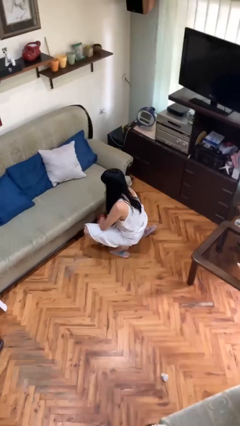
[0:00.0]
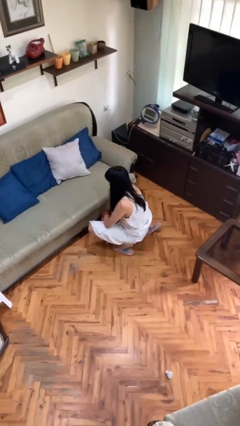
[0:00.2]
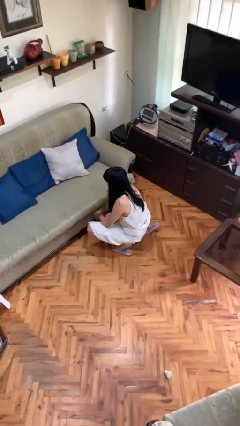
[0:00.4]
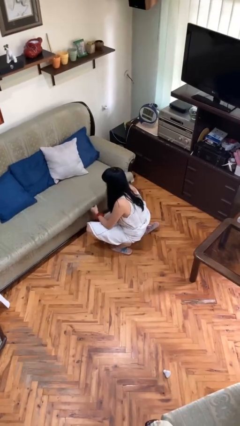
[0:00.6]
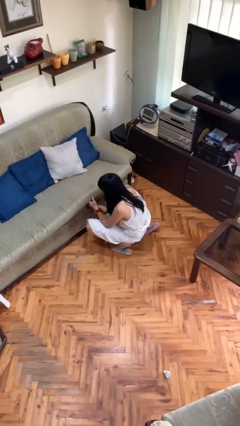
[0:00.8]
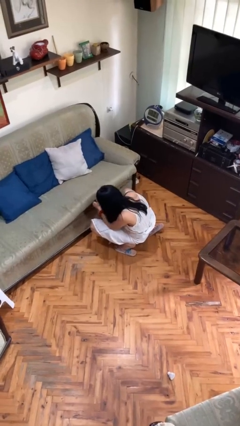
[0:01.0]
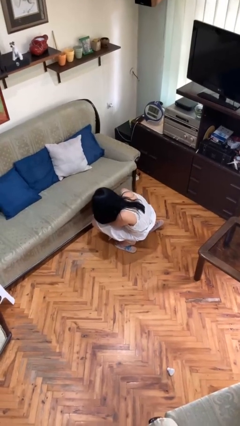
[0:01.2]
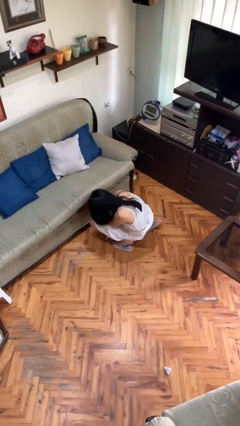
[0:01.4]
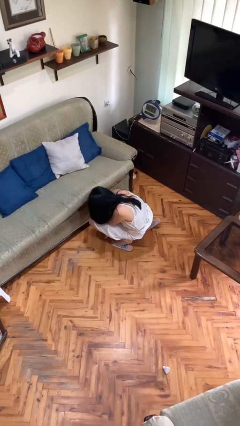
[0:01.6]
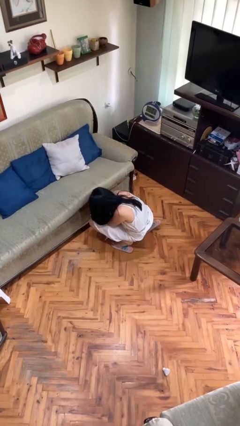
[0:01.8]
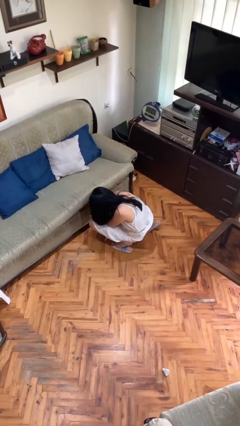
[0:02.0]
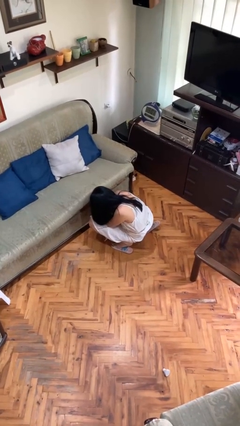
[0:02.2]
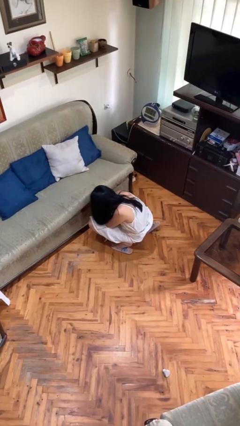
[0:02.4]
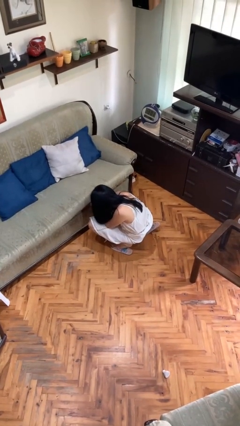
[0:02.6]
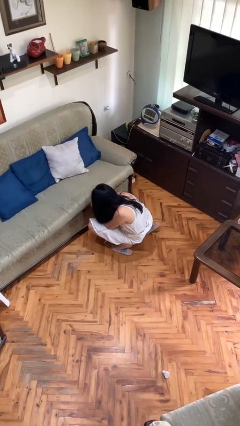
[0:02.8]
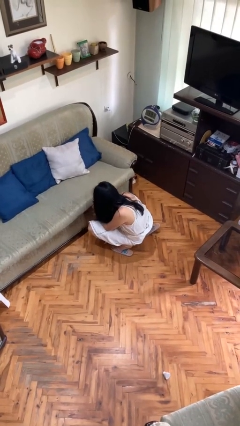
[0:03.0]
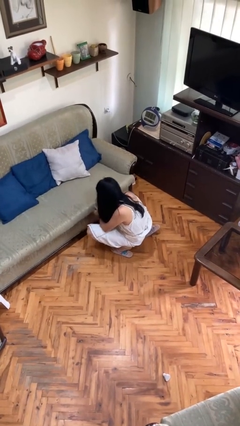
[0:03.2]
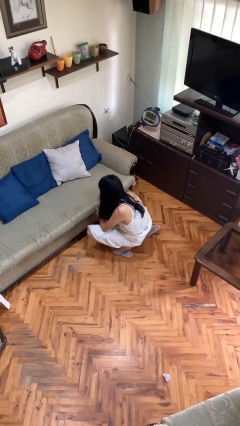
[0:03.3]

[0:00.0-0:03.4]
person searches under couch

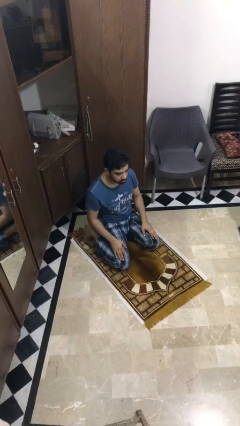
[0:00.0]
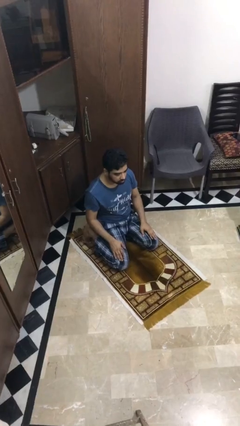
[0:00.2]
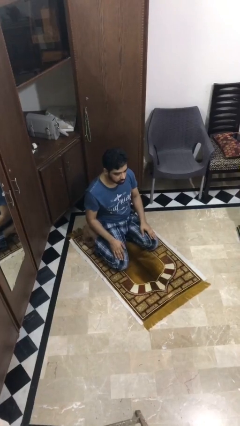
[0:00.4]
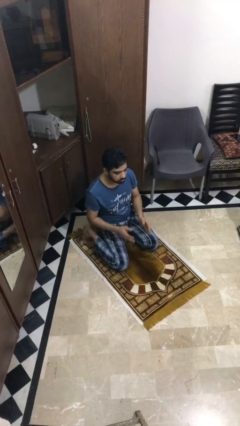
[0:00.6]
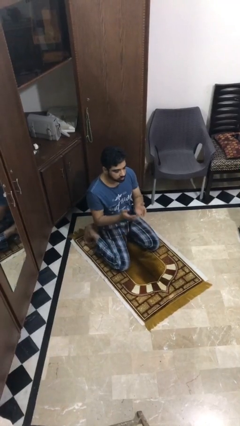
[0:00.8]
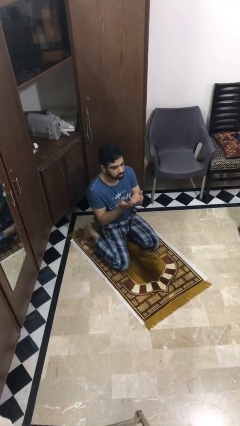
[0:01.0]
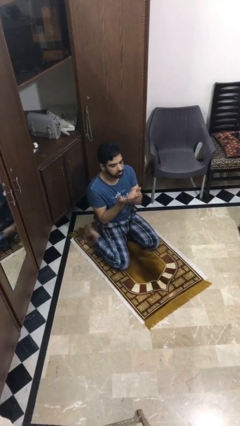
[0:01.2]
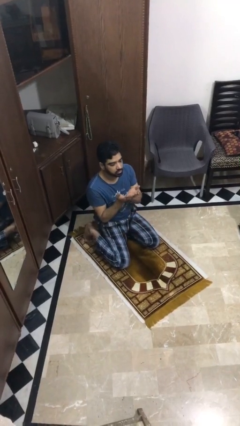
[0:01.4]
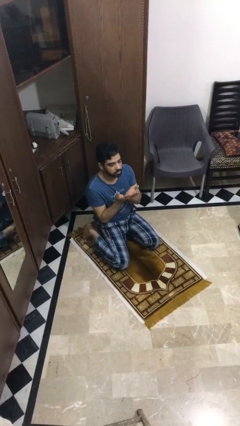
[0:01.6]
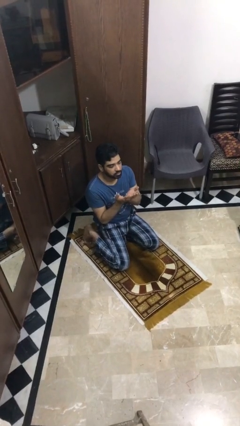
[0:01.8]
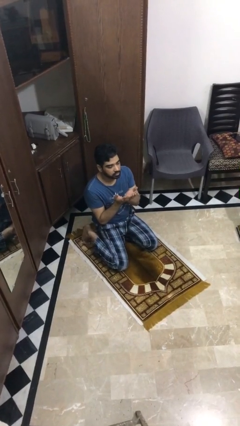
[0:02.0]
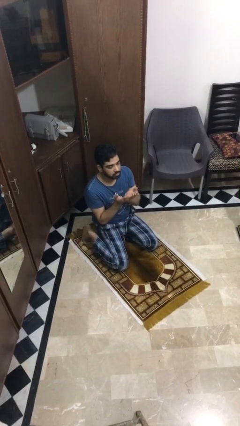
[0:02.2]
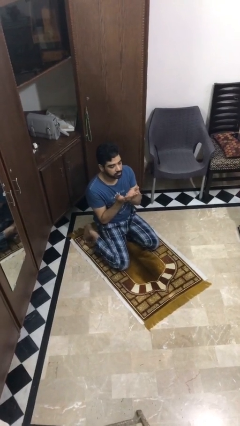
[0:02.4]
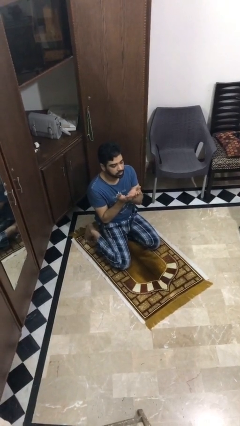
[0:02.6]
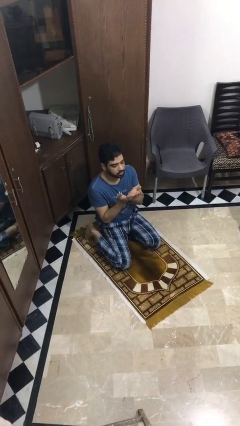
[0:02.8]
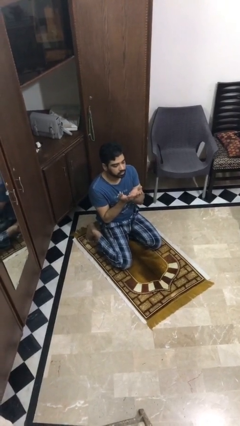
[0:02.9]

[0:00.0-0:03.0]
person prays

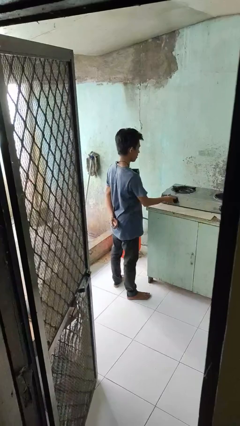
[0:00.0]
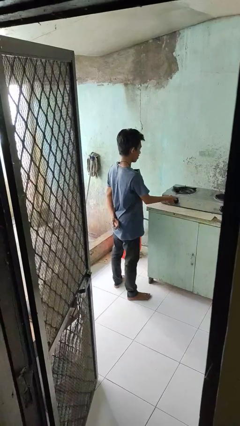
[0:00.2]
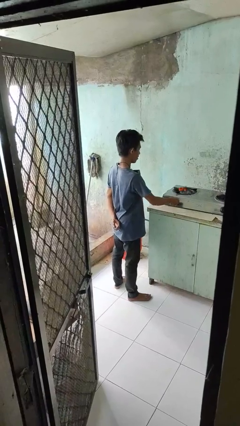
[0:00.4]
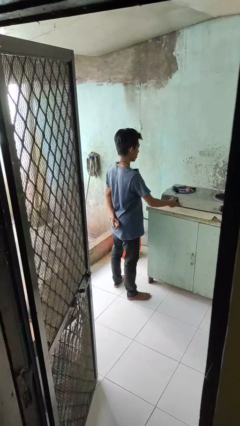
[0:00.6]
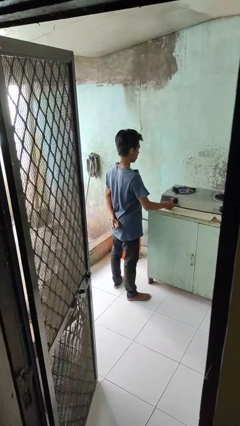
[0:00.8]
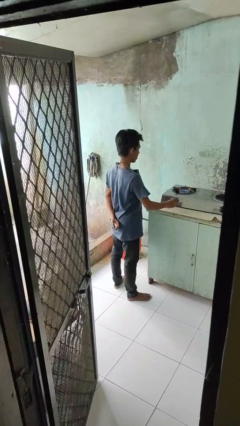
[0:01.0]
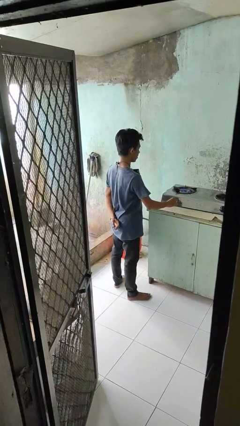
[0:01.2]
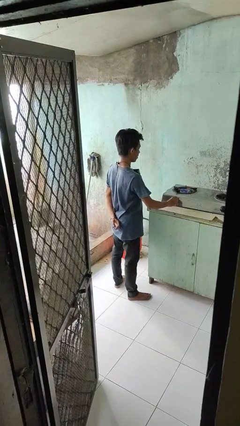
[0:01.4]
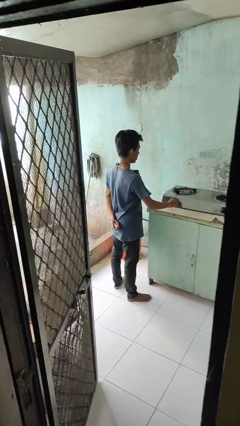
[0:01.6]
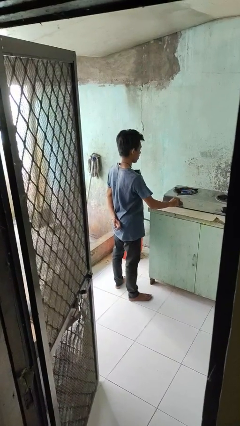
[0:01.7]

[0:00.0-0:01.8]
person turns on stovetop

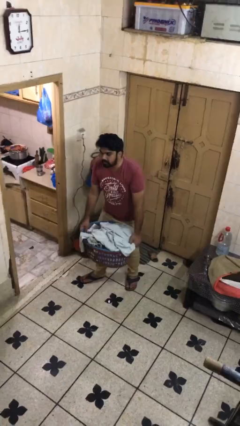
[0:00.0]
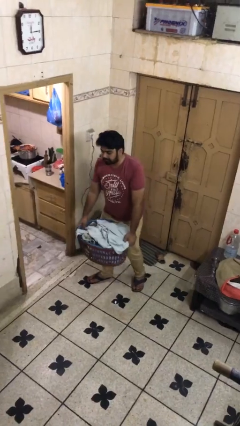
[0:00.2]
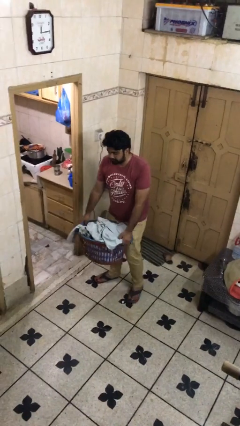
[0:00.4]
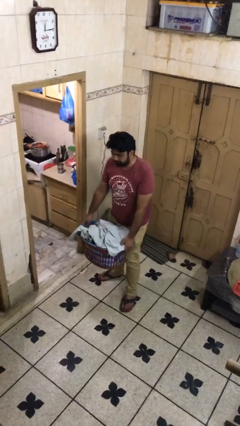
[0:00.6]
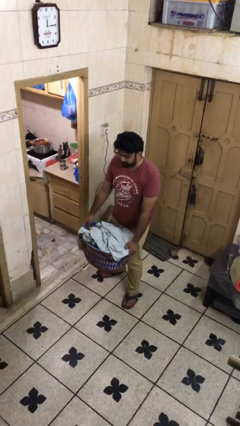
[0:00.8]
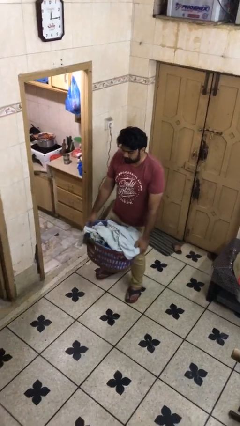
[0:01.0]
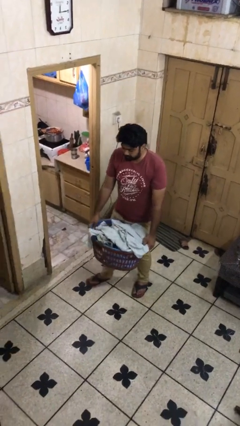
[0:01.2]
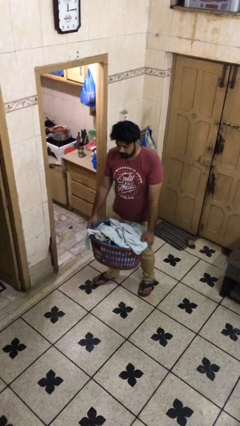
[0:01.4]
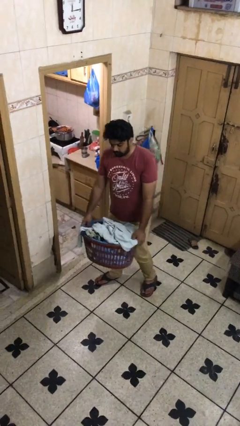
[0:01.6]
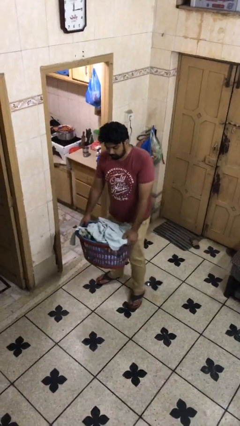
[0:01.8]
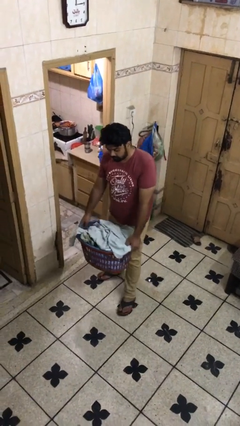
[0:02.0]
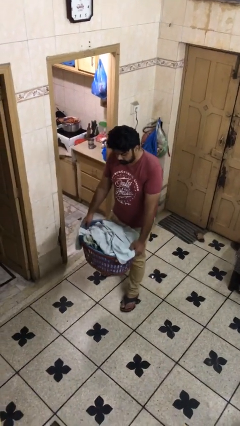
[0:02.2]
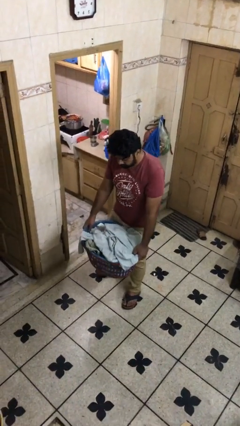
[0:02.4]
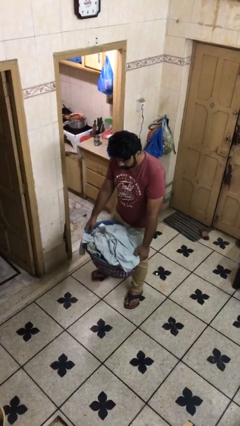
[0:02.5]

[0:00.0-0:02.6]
person carries heavy object

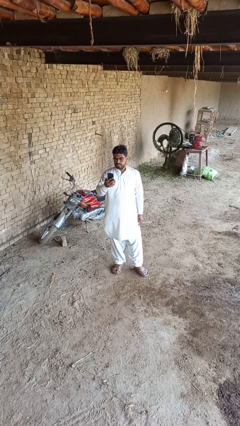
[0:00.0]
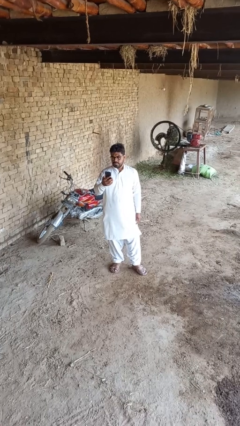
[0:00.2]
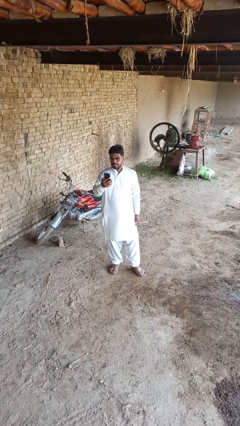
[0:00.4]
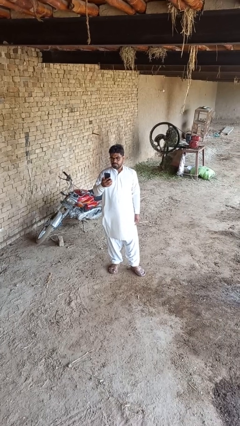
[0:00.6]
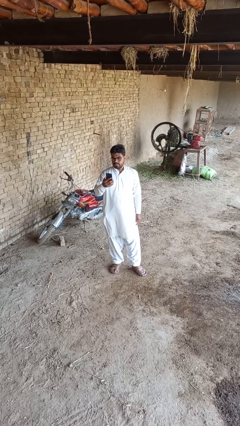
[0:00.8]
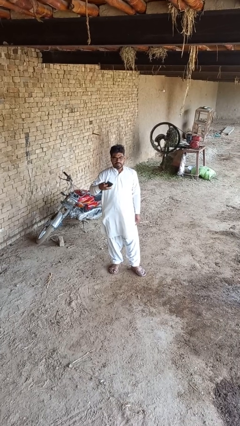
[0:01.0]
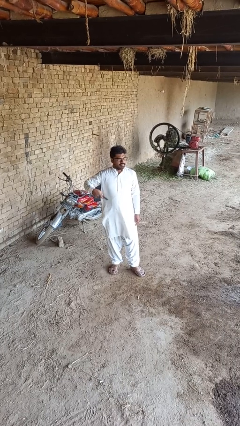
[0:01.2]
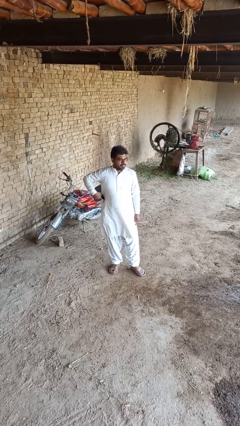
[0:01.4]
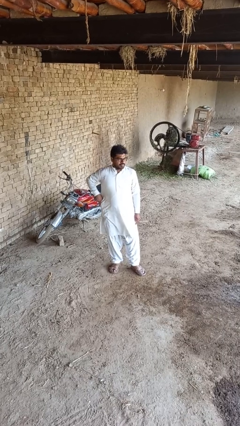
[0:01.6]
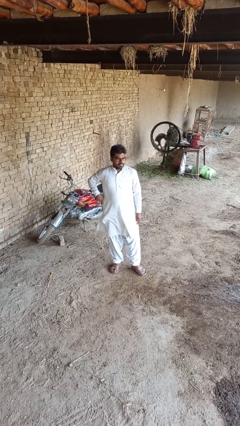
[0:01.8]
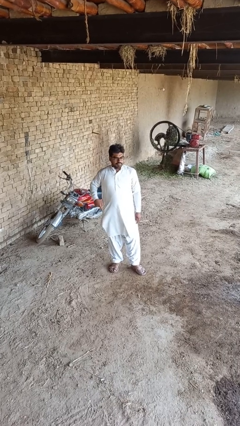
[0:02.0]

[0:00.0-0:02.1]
person puts phone into pocket

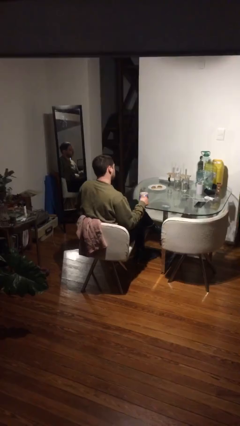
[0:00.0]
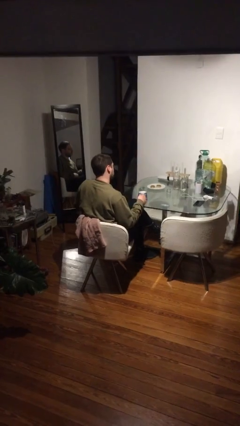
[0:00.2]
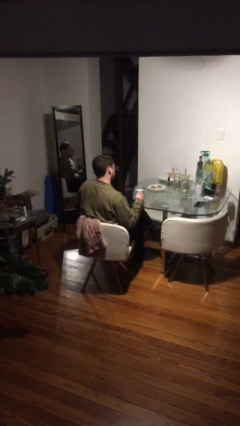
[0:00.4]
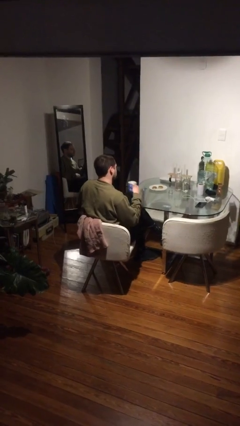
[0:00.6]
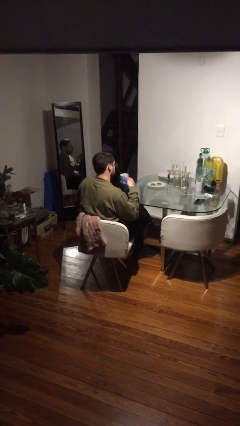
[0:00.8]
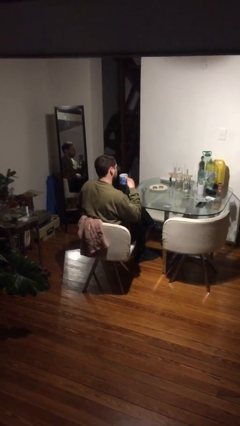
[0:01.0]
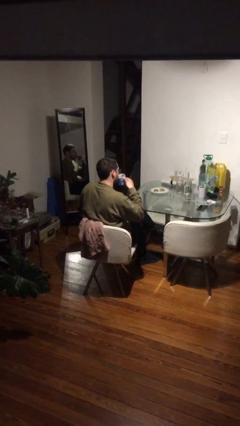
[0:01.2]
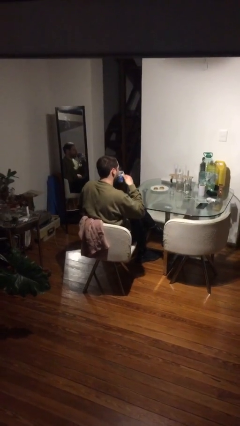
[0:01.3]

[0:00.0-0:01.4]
person picks up object from table

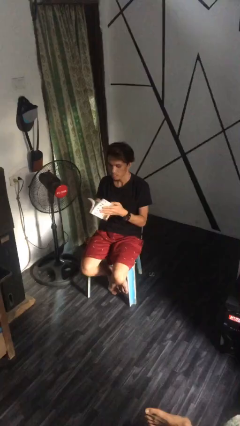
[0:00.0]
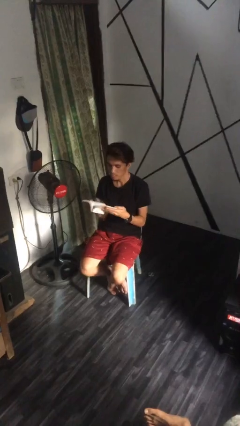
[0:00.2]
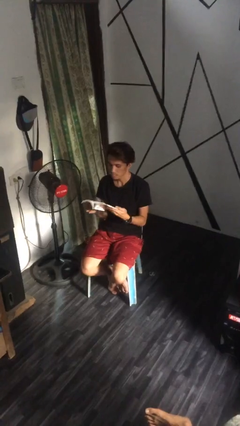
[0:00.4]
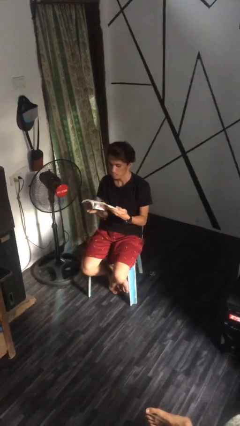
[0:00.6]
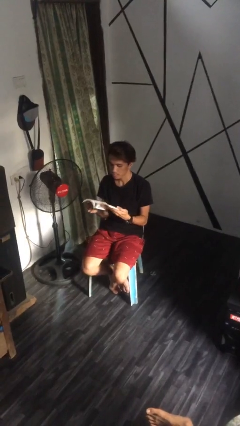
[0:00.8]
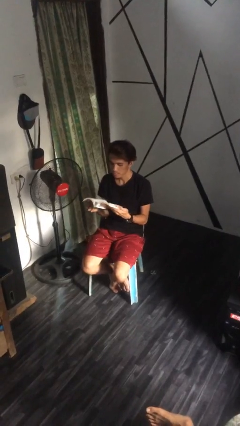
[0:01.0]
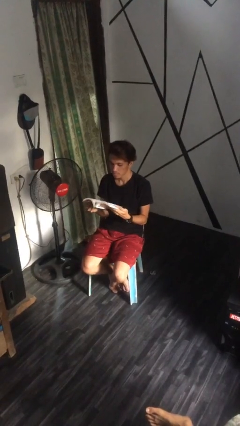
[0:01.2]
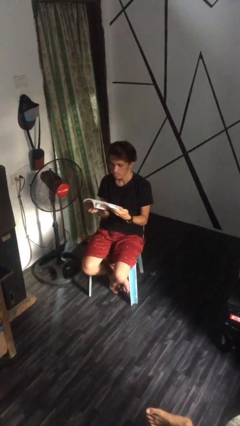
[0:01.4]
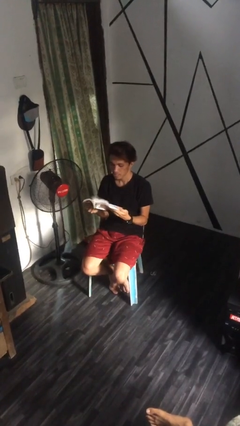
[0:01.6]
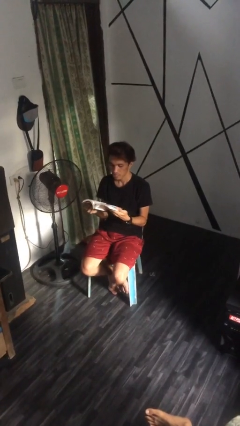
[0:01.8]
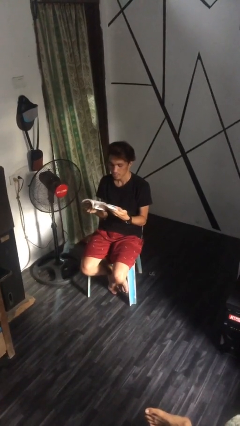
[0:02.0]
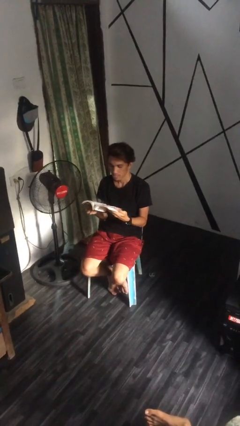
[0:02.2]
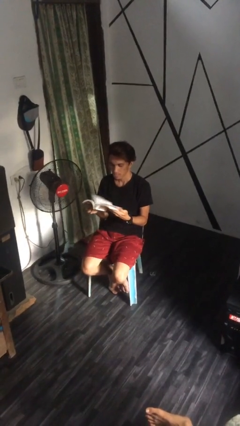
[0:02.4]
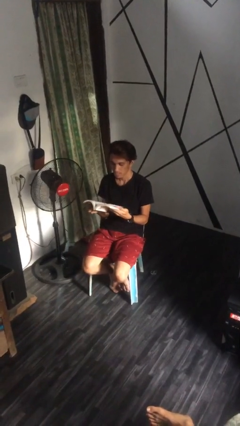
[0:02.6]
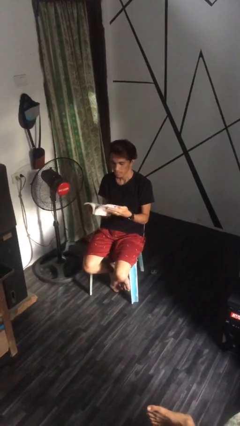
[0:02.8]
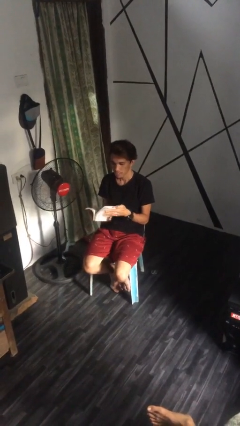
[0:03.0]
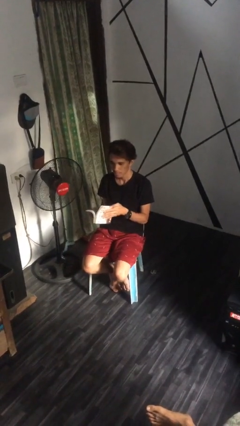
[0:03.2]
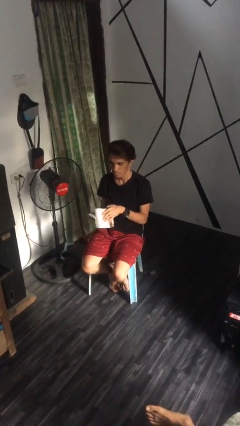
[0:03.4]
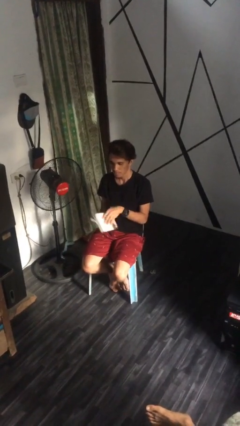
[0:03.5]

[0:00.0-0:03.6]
person reads document
